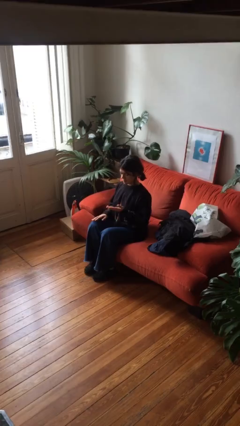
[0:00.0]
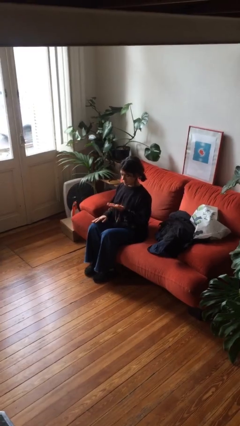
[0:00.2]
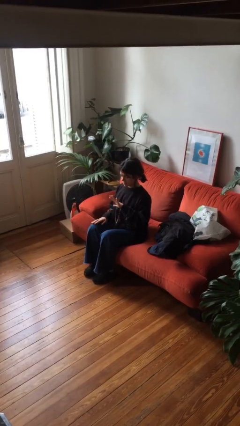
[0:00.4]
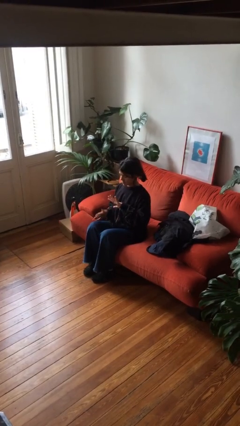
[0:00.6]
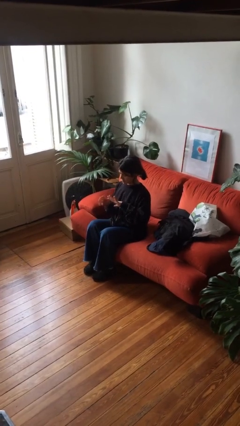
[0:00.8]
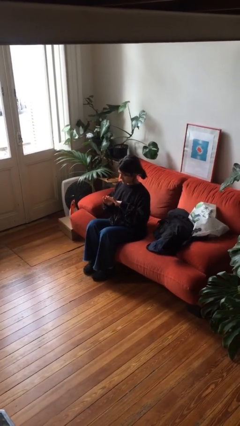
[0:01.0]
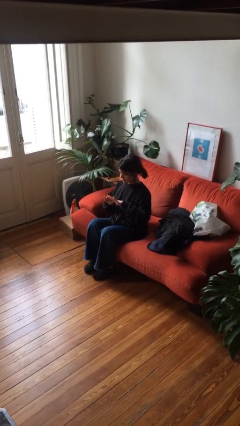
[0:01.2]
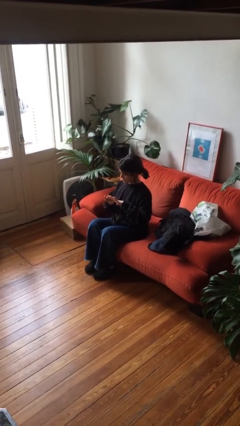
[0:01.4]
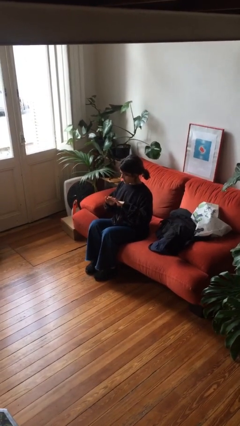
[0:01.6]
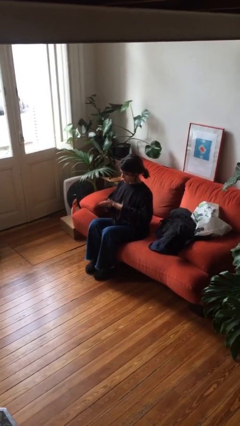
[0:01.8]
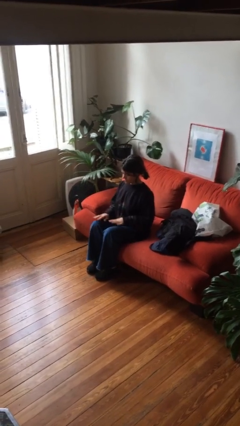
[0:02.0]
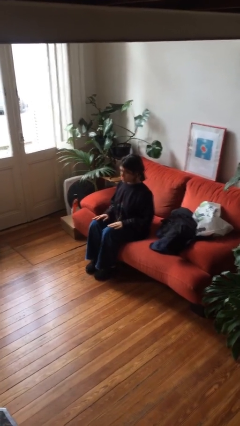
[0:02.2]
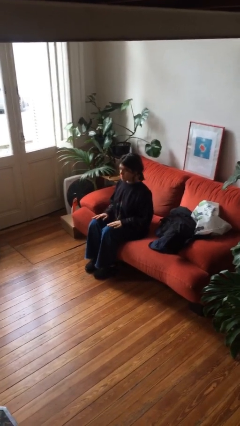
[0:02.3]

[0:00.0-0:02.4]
person looks at hands in lap

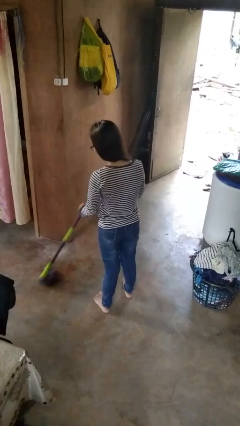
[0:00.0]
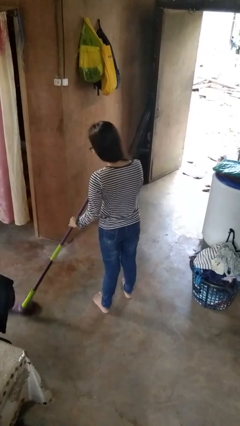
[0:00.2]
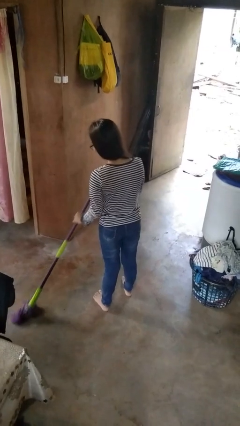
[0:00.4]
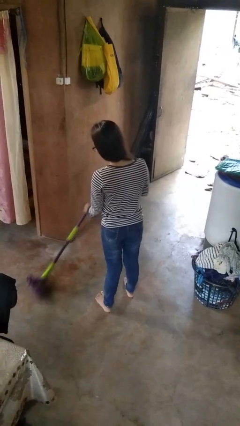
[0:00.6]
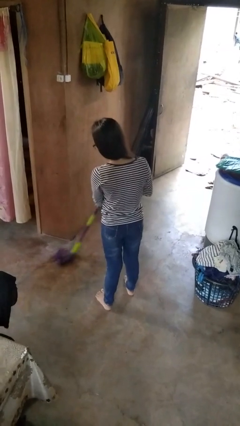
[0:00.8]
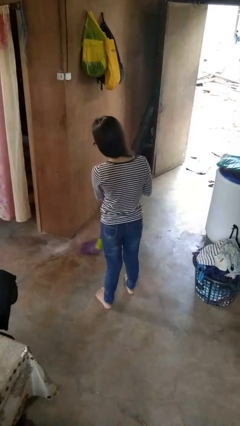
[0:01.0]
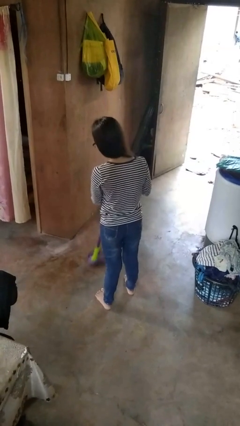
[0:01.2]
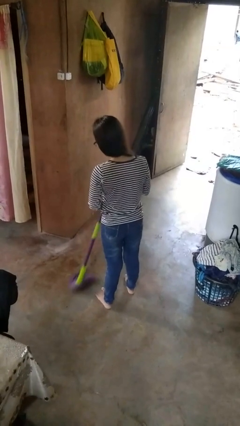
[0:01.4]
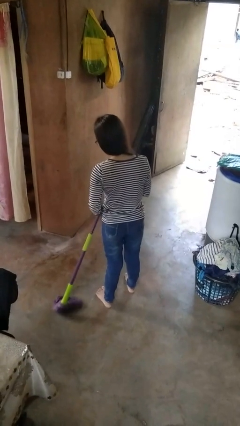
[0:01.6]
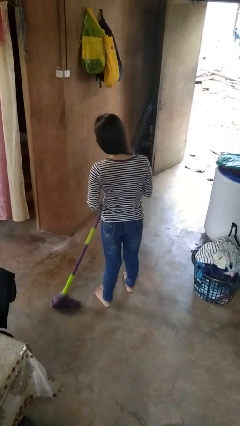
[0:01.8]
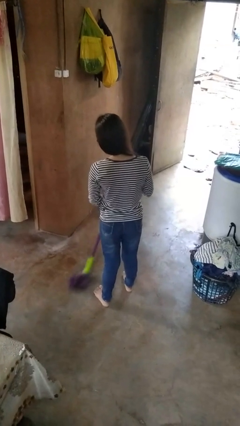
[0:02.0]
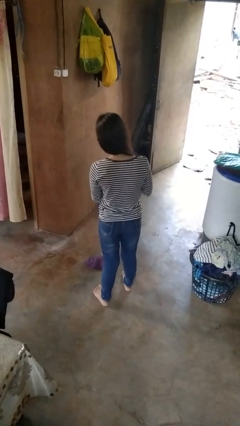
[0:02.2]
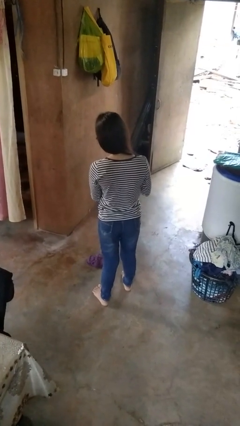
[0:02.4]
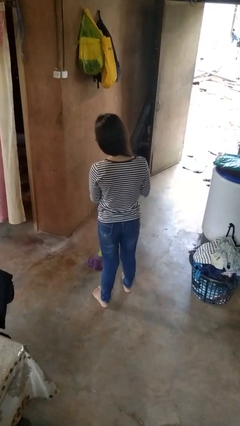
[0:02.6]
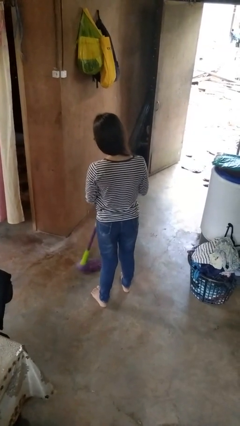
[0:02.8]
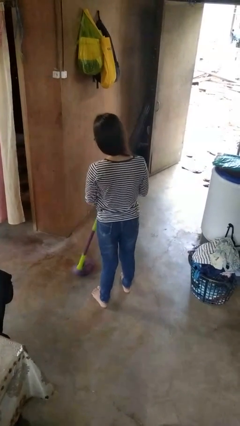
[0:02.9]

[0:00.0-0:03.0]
person mops

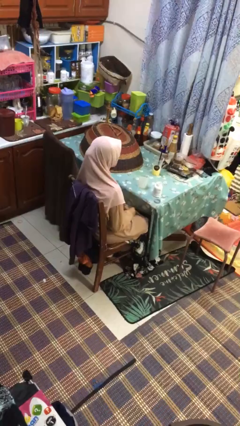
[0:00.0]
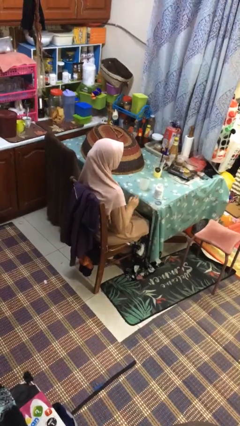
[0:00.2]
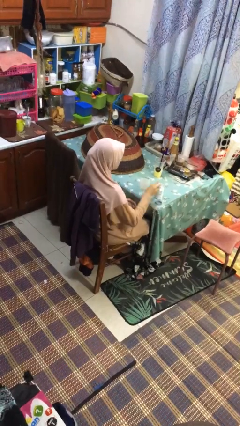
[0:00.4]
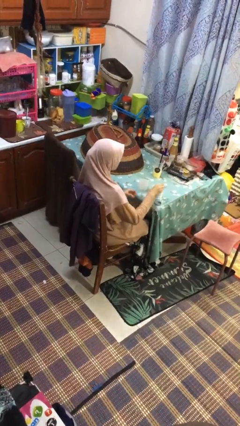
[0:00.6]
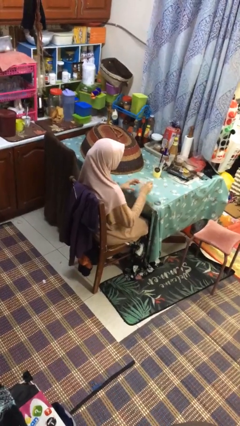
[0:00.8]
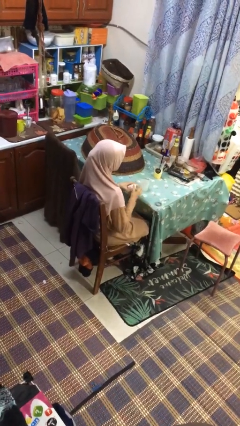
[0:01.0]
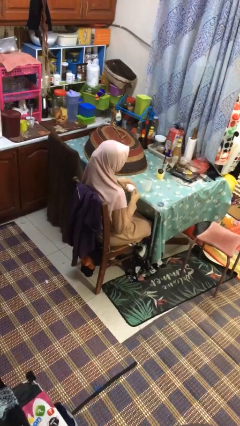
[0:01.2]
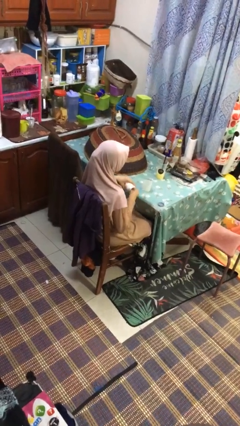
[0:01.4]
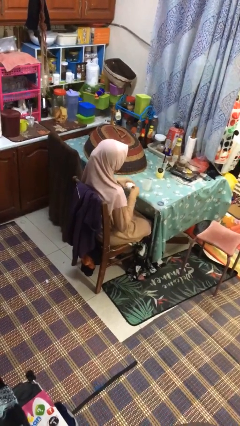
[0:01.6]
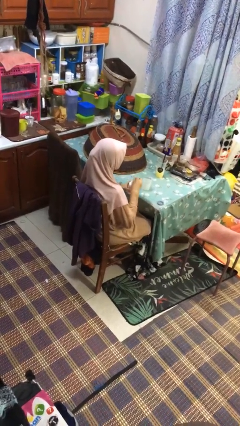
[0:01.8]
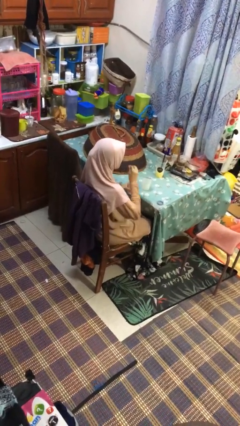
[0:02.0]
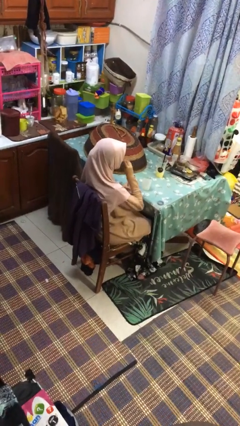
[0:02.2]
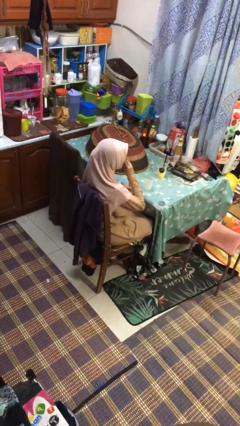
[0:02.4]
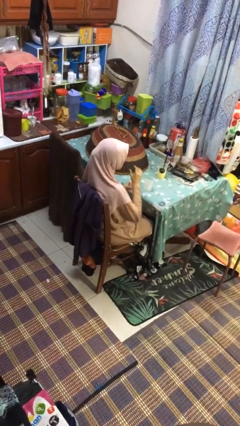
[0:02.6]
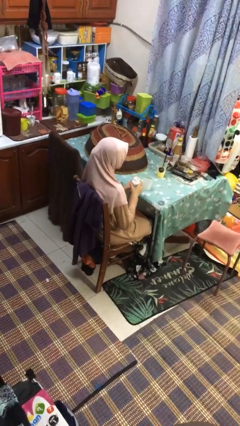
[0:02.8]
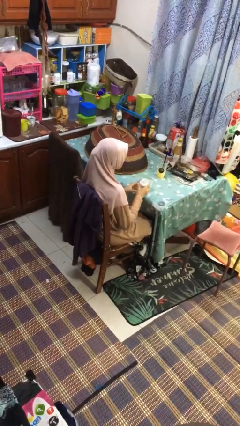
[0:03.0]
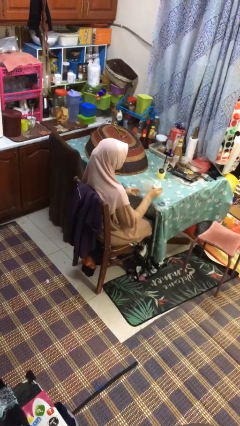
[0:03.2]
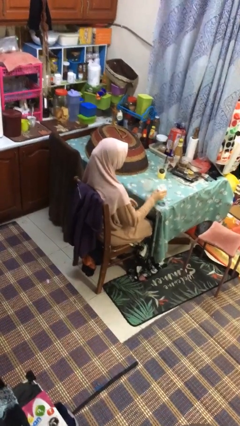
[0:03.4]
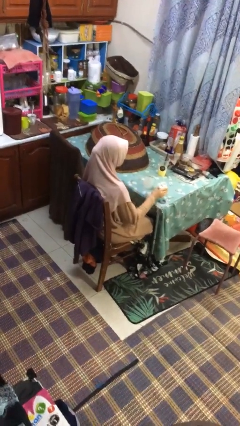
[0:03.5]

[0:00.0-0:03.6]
person takes medicine pills

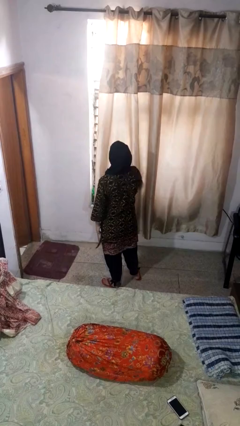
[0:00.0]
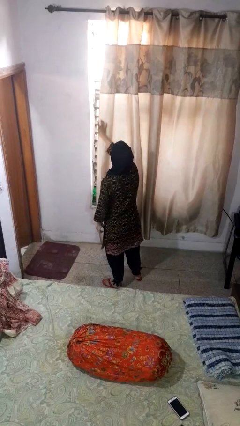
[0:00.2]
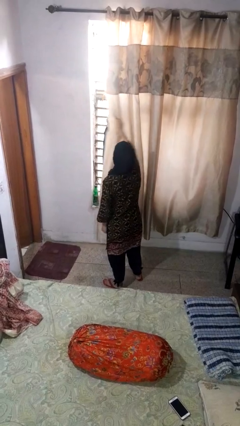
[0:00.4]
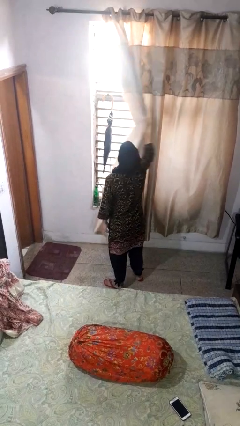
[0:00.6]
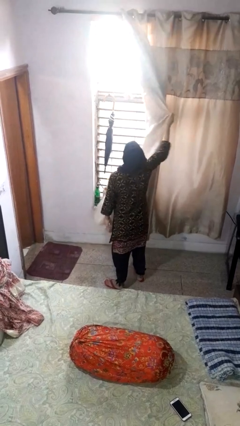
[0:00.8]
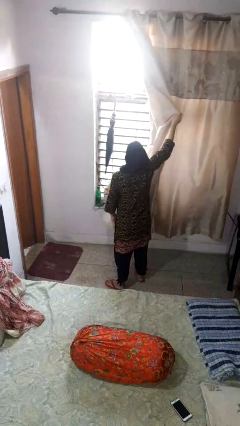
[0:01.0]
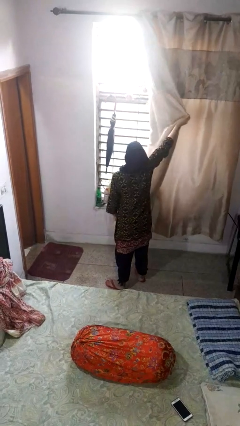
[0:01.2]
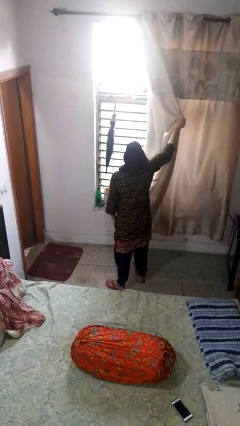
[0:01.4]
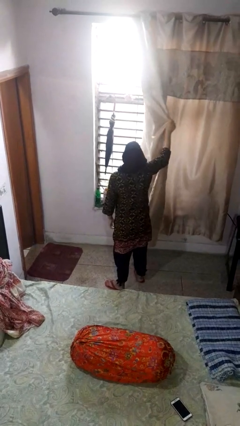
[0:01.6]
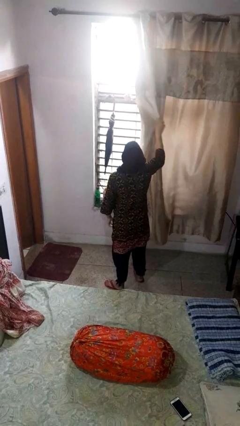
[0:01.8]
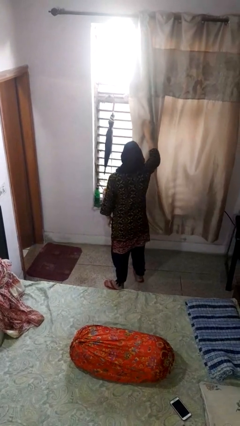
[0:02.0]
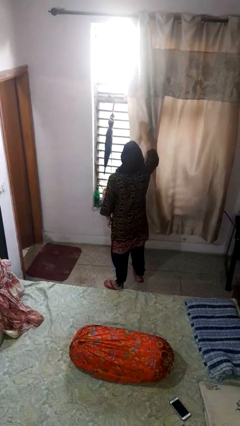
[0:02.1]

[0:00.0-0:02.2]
person opens curtains

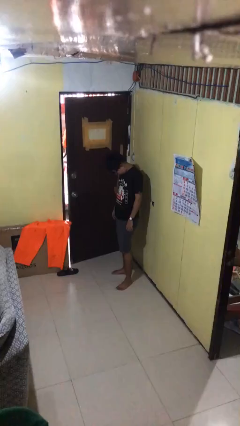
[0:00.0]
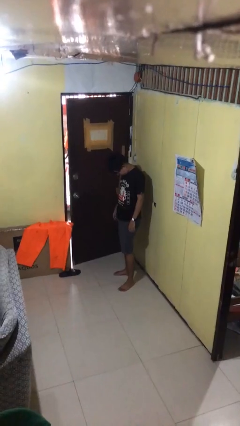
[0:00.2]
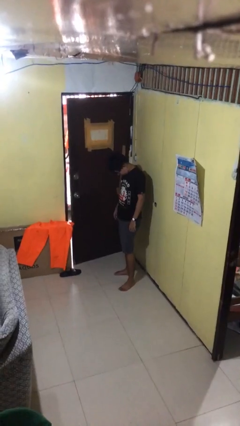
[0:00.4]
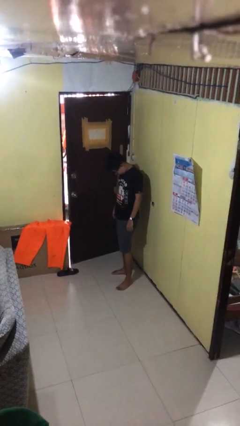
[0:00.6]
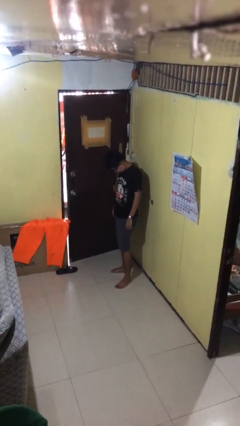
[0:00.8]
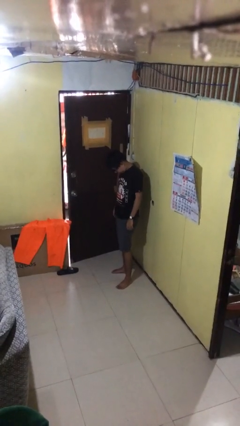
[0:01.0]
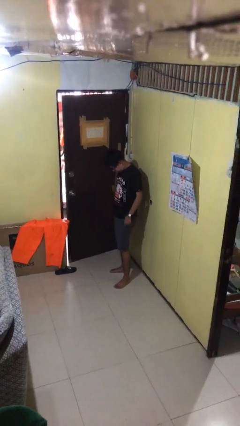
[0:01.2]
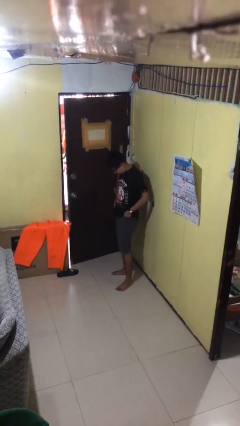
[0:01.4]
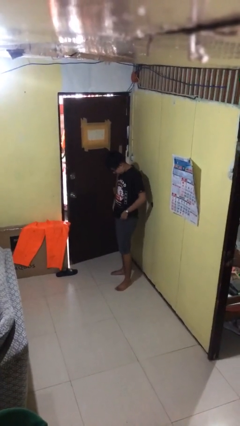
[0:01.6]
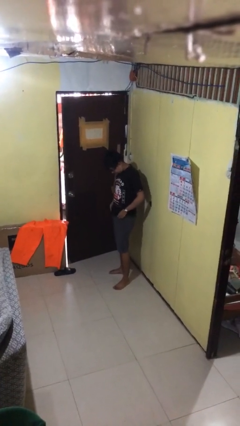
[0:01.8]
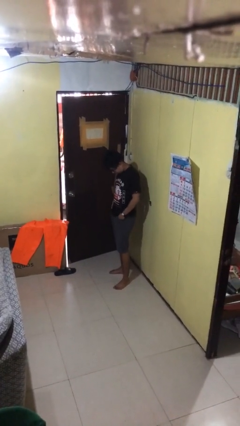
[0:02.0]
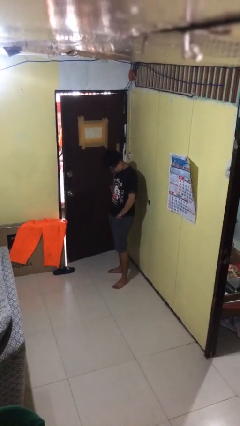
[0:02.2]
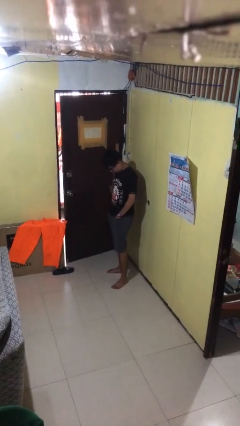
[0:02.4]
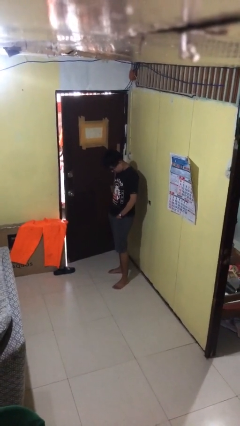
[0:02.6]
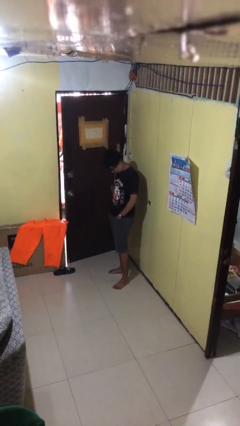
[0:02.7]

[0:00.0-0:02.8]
person puts hands in back pockets

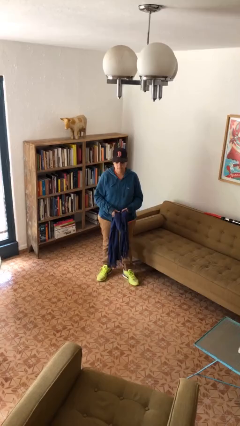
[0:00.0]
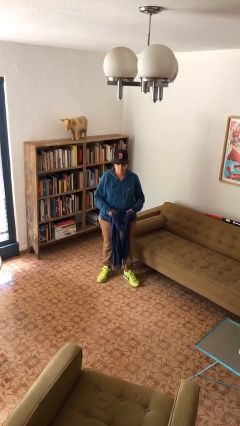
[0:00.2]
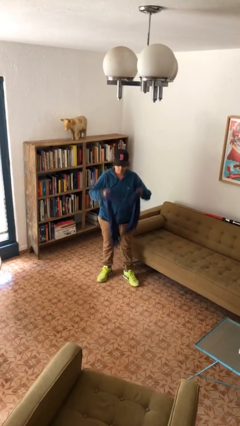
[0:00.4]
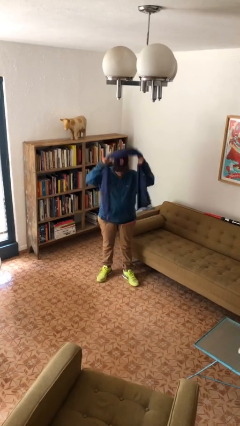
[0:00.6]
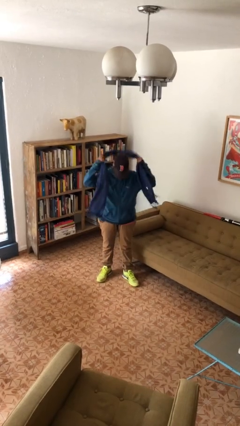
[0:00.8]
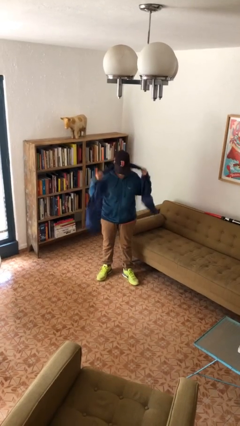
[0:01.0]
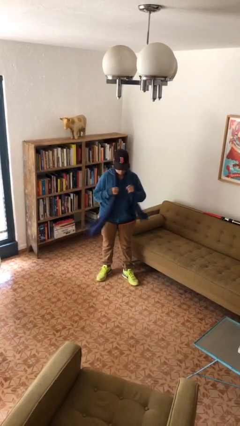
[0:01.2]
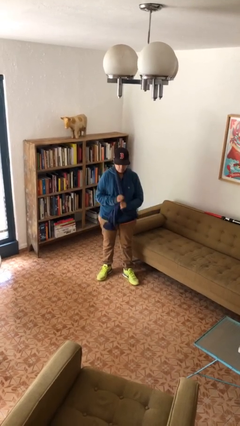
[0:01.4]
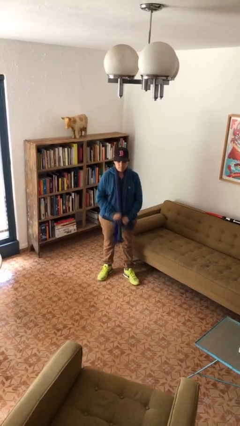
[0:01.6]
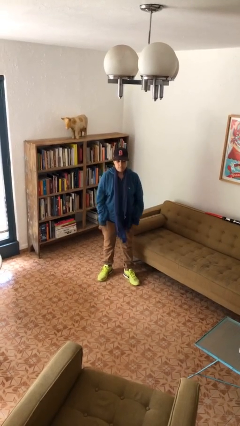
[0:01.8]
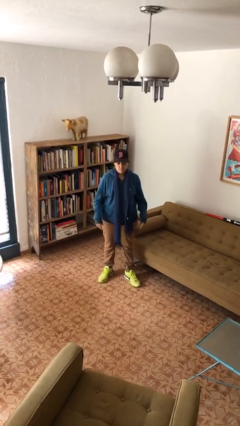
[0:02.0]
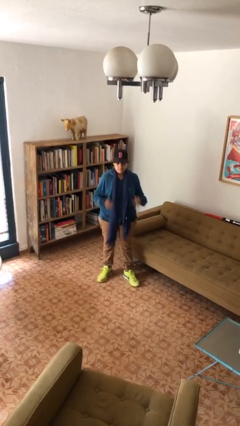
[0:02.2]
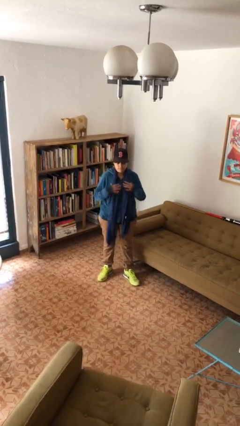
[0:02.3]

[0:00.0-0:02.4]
person puts on scarf

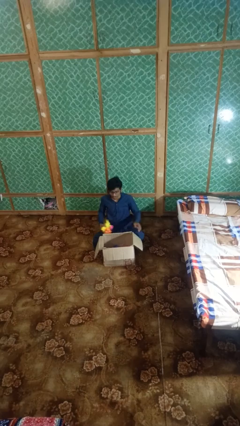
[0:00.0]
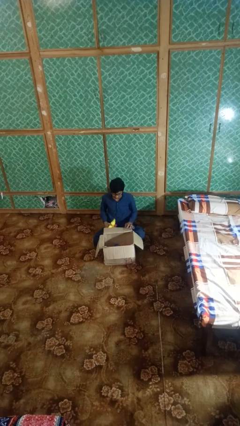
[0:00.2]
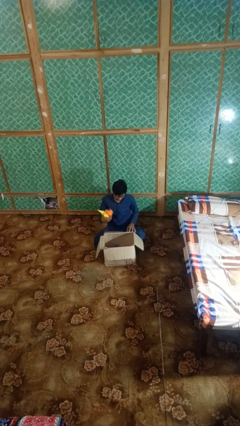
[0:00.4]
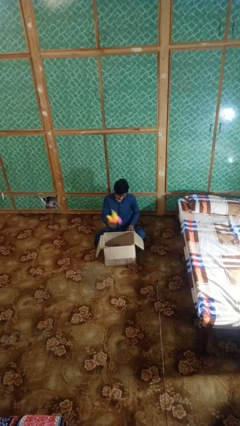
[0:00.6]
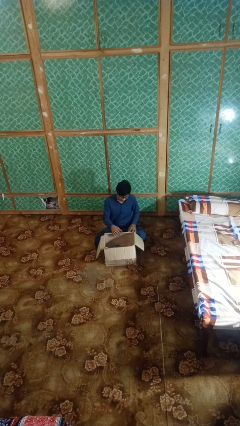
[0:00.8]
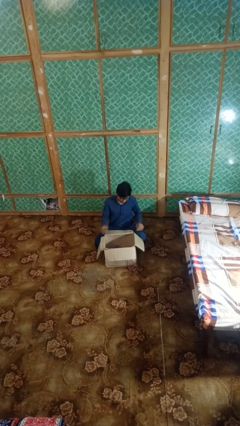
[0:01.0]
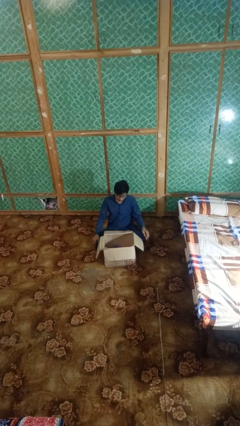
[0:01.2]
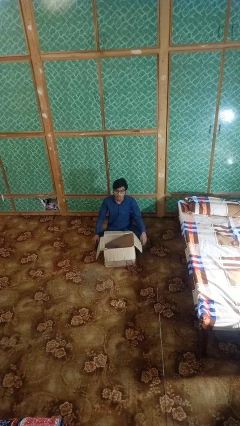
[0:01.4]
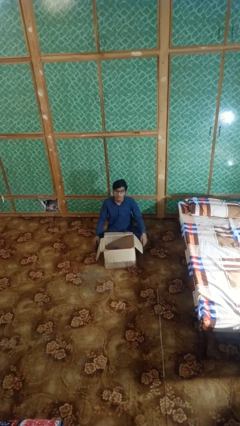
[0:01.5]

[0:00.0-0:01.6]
person puts object into box
